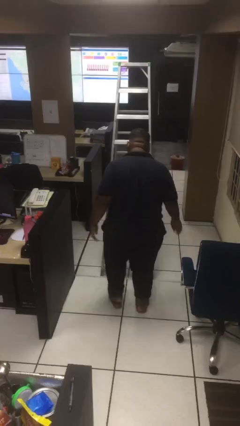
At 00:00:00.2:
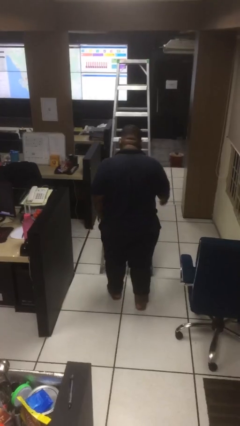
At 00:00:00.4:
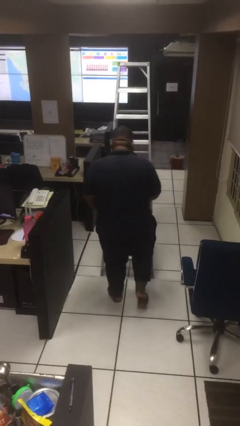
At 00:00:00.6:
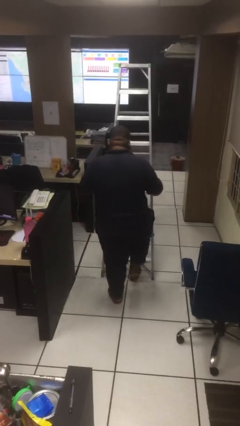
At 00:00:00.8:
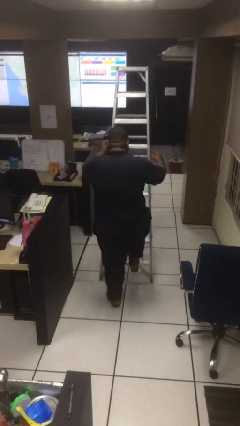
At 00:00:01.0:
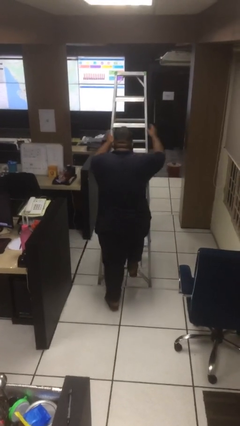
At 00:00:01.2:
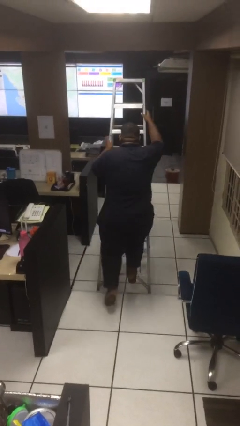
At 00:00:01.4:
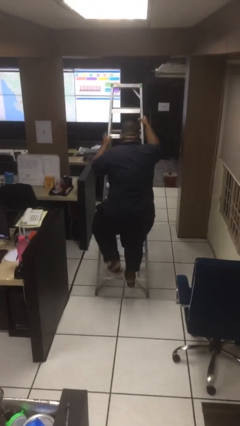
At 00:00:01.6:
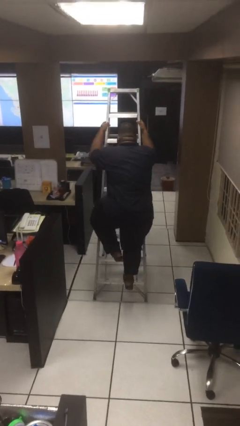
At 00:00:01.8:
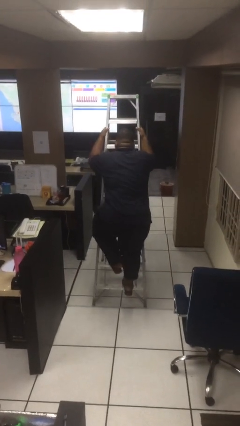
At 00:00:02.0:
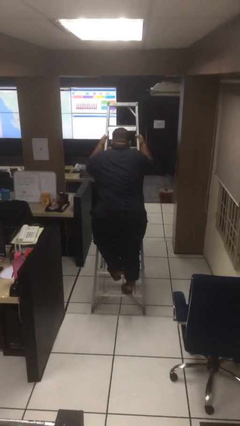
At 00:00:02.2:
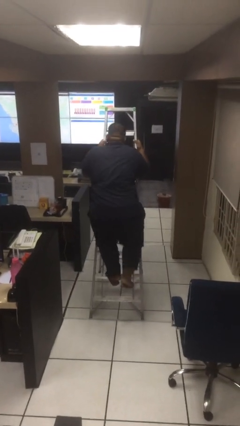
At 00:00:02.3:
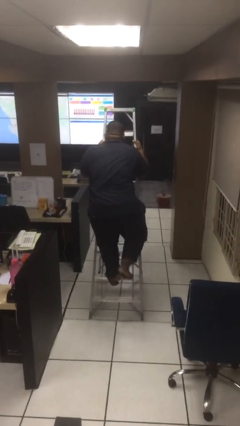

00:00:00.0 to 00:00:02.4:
person climbs up ladder

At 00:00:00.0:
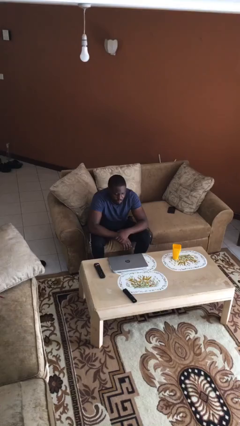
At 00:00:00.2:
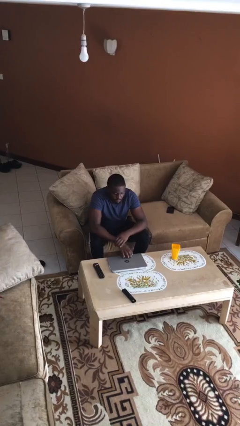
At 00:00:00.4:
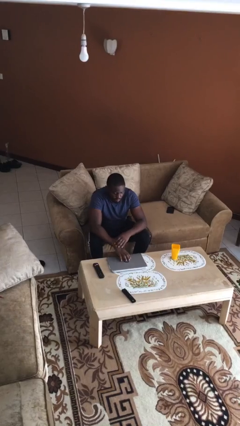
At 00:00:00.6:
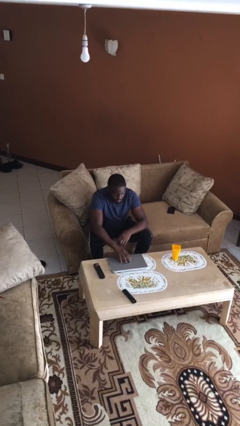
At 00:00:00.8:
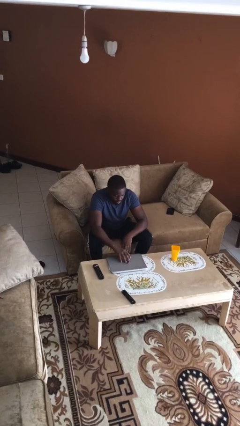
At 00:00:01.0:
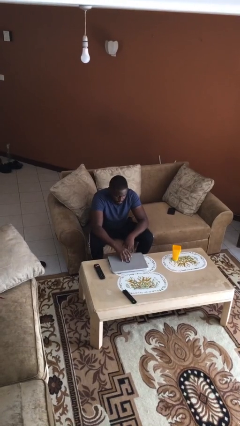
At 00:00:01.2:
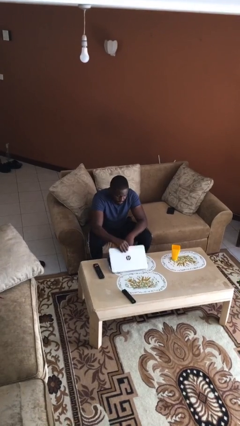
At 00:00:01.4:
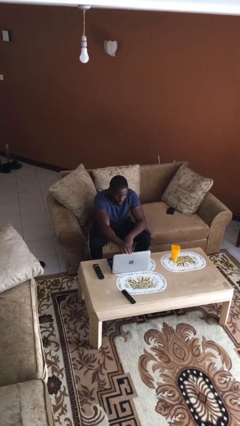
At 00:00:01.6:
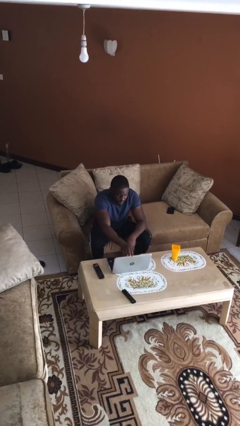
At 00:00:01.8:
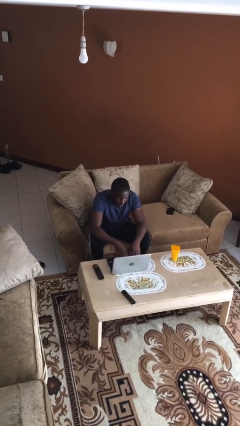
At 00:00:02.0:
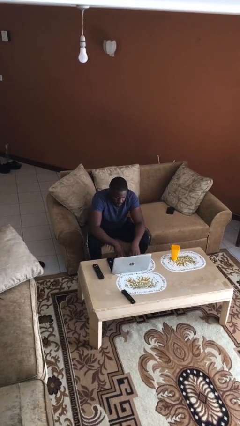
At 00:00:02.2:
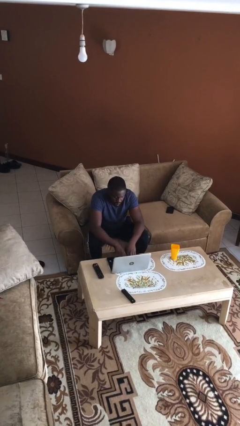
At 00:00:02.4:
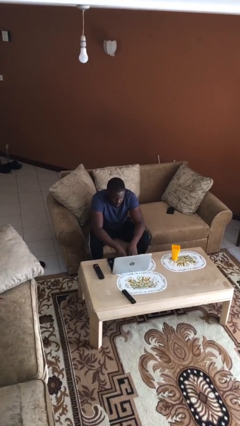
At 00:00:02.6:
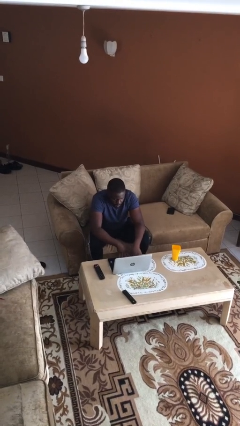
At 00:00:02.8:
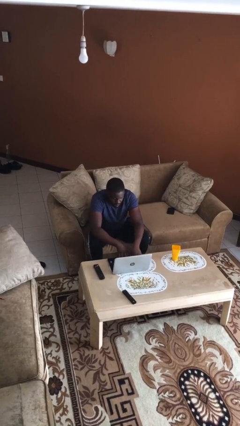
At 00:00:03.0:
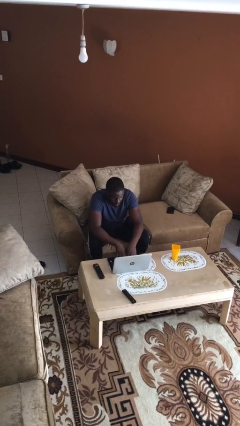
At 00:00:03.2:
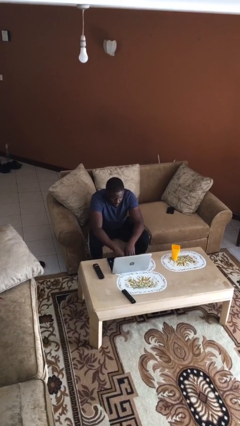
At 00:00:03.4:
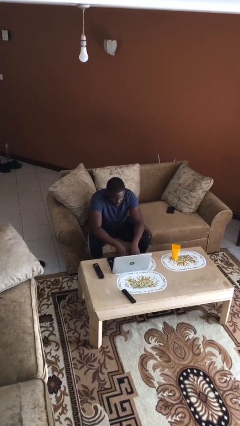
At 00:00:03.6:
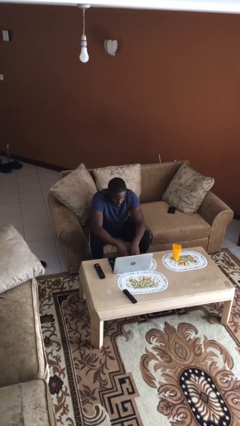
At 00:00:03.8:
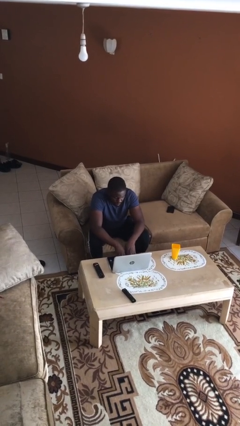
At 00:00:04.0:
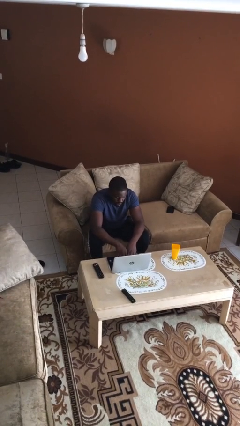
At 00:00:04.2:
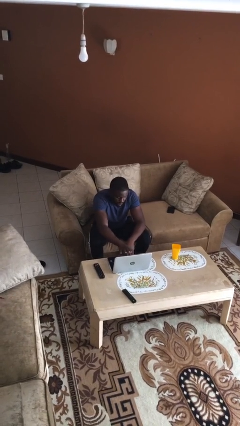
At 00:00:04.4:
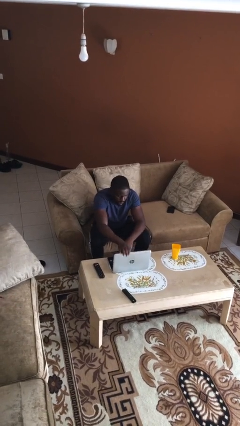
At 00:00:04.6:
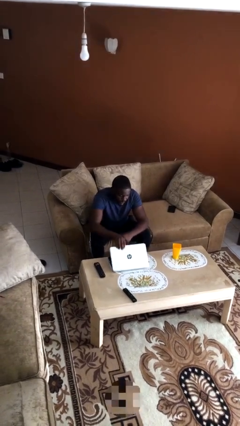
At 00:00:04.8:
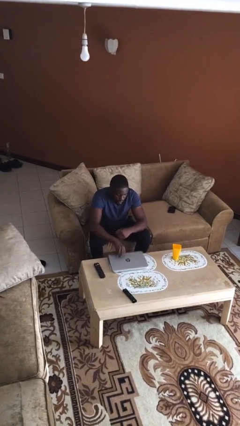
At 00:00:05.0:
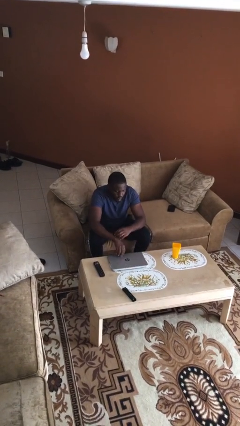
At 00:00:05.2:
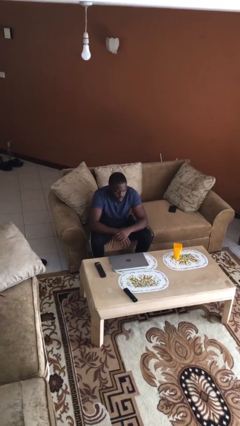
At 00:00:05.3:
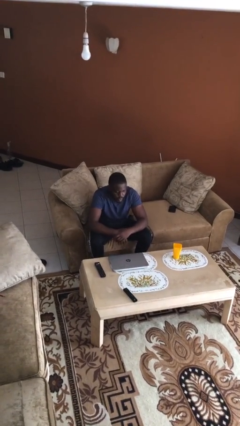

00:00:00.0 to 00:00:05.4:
person interacts with laptop

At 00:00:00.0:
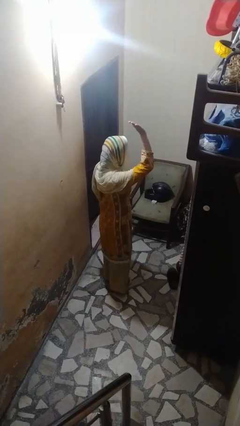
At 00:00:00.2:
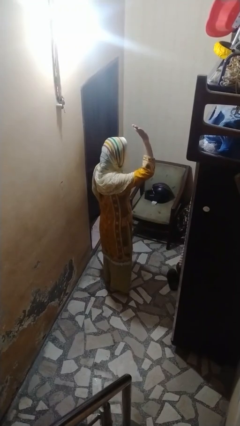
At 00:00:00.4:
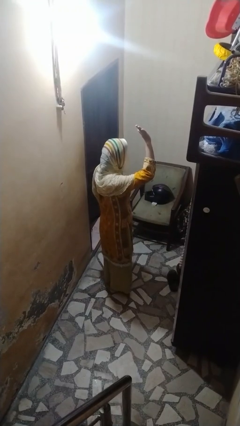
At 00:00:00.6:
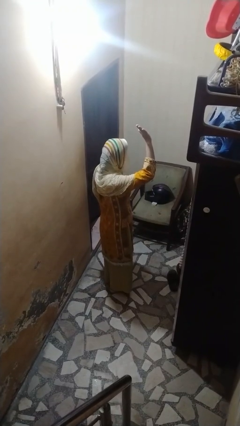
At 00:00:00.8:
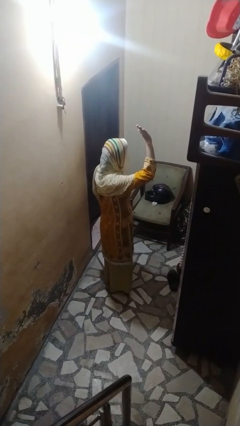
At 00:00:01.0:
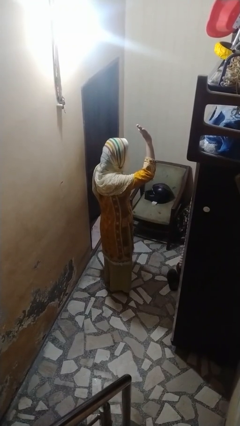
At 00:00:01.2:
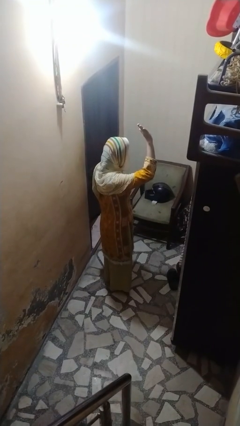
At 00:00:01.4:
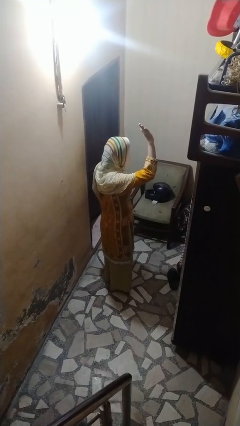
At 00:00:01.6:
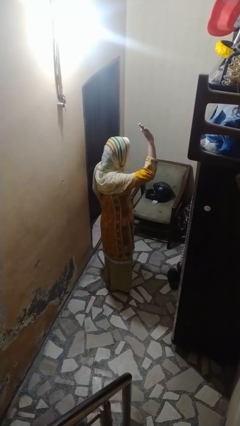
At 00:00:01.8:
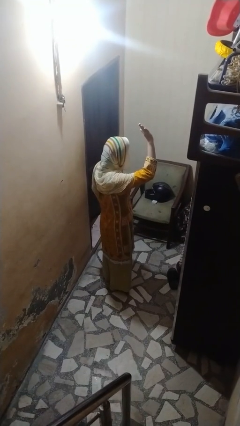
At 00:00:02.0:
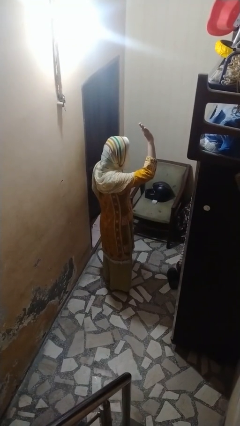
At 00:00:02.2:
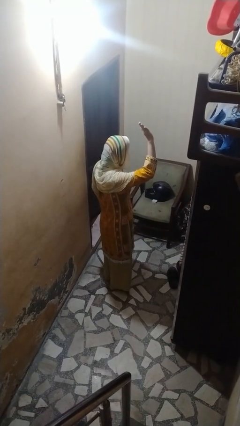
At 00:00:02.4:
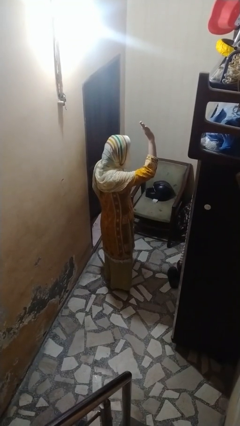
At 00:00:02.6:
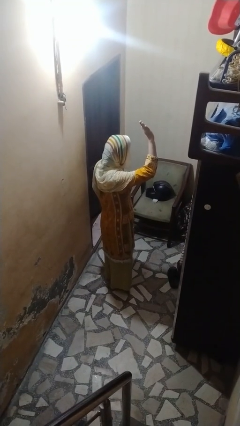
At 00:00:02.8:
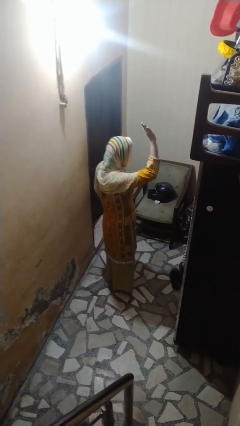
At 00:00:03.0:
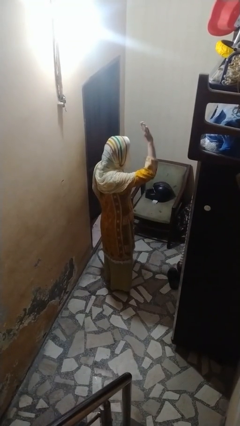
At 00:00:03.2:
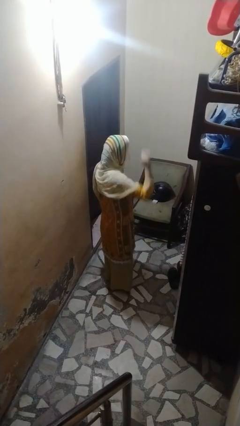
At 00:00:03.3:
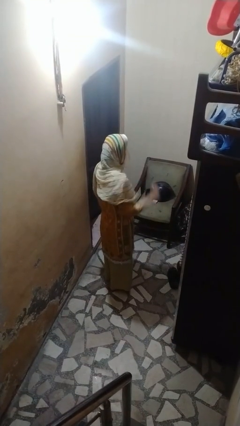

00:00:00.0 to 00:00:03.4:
person gestures raise hand

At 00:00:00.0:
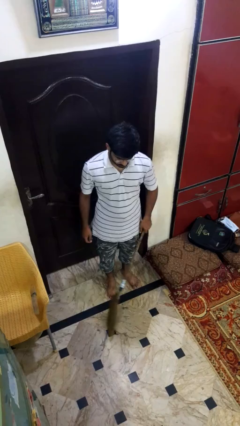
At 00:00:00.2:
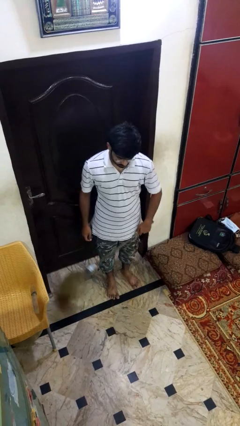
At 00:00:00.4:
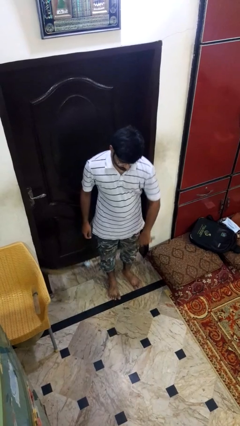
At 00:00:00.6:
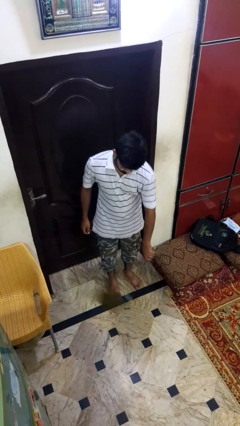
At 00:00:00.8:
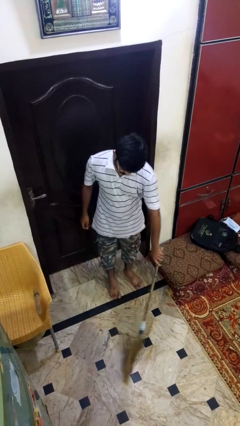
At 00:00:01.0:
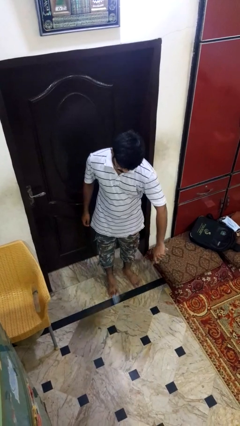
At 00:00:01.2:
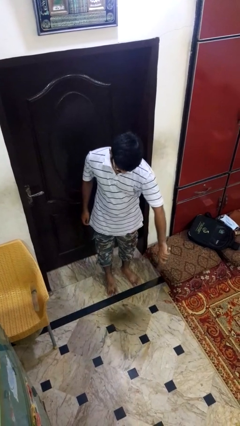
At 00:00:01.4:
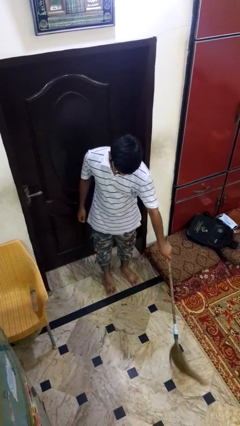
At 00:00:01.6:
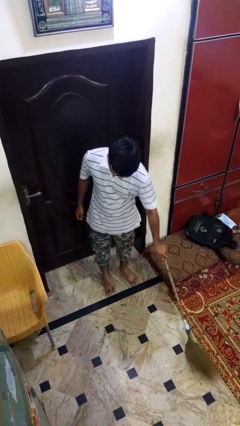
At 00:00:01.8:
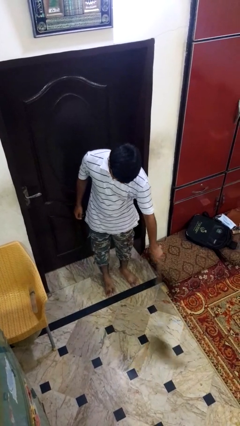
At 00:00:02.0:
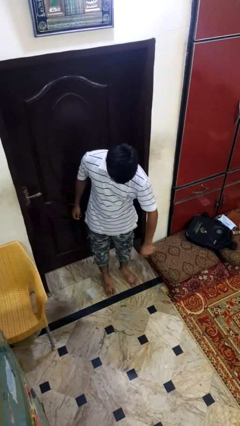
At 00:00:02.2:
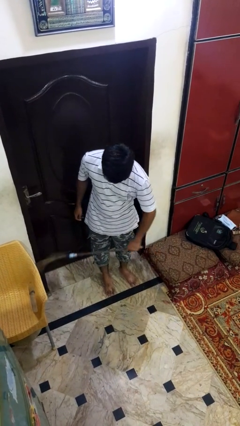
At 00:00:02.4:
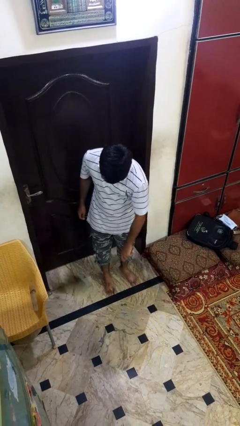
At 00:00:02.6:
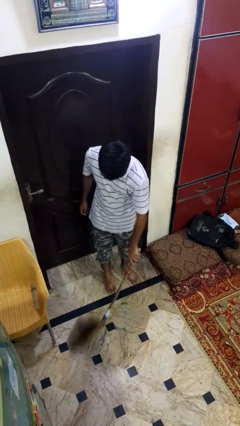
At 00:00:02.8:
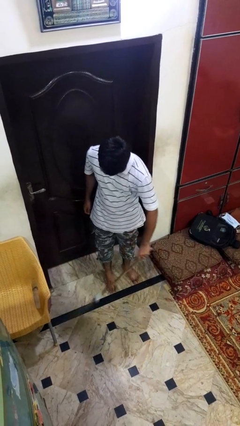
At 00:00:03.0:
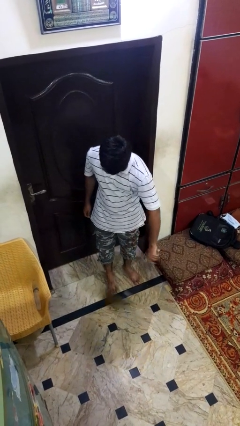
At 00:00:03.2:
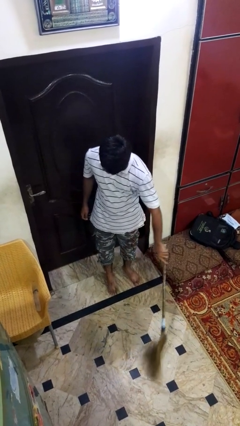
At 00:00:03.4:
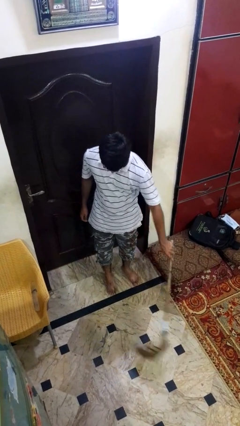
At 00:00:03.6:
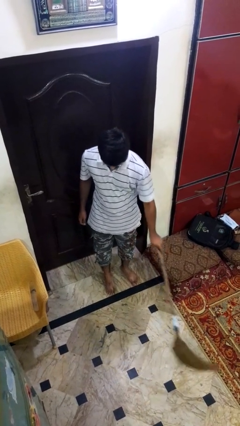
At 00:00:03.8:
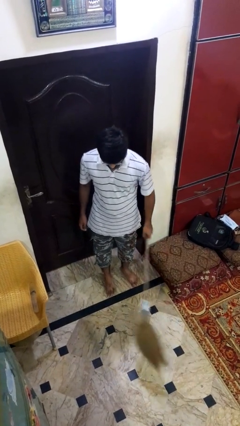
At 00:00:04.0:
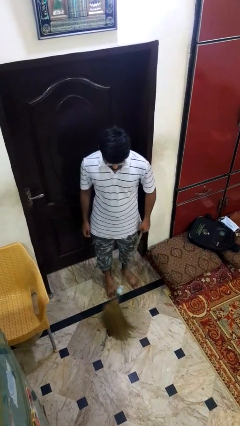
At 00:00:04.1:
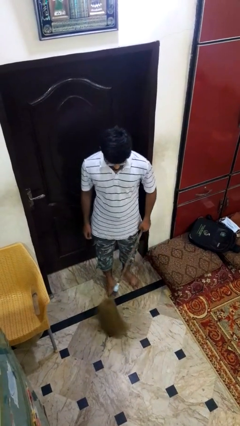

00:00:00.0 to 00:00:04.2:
person sweeps floor

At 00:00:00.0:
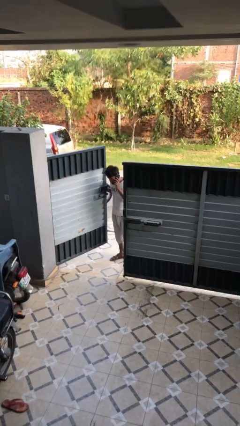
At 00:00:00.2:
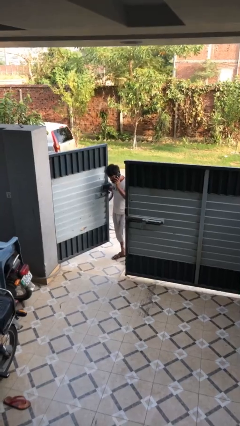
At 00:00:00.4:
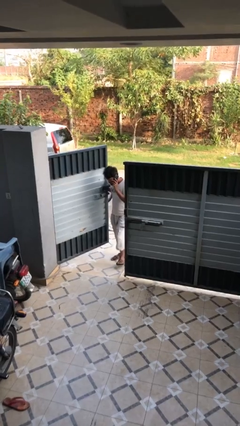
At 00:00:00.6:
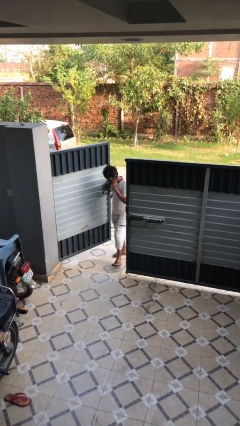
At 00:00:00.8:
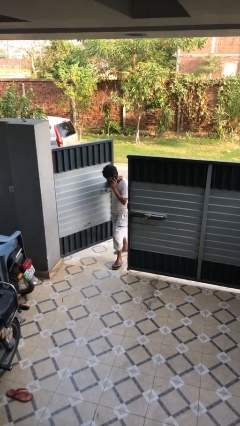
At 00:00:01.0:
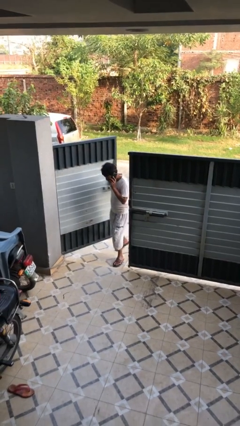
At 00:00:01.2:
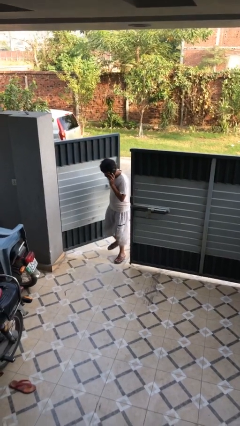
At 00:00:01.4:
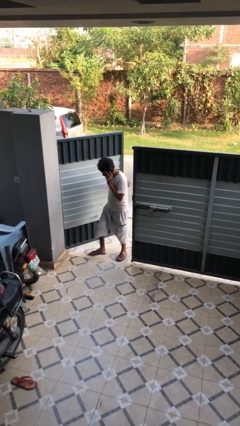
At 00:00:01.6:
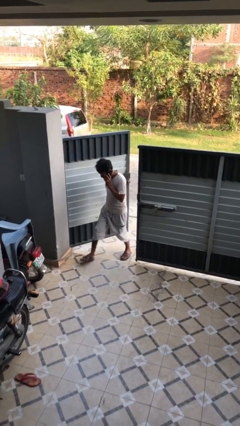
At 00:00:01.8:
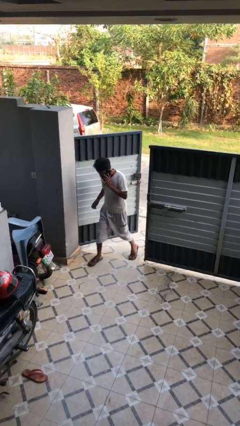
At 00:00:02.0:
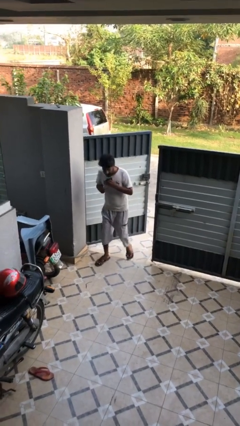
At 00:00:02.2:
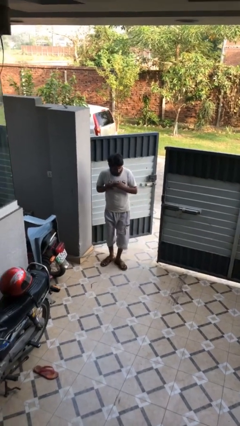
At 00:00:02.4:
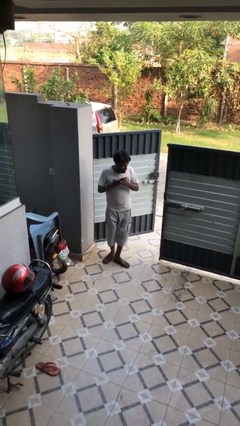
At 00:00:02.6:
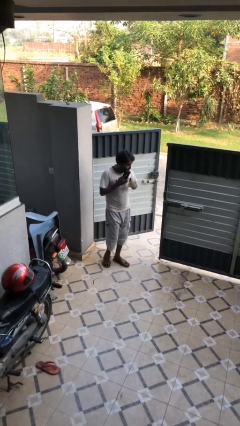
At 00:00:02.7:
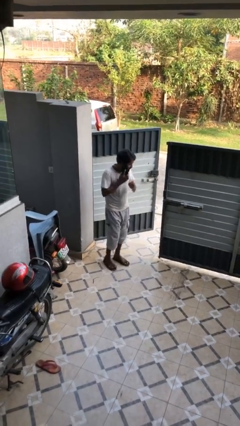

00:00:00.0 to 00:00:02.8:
person enters scene through structure
